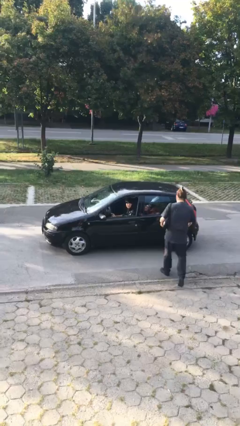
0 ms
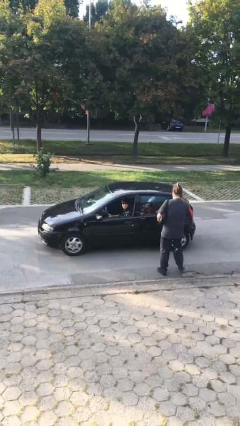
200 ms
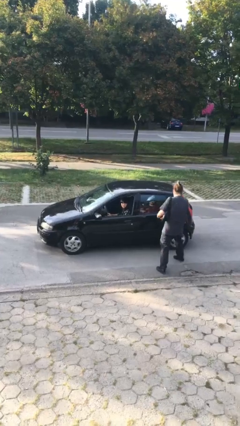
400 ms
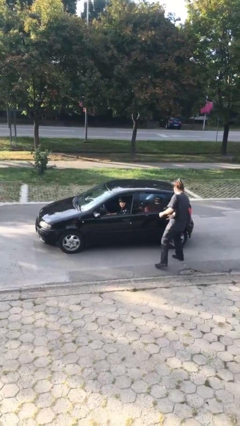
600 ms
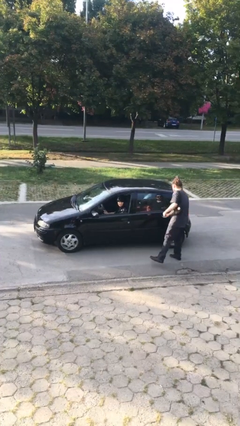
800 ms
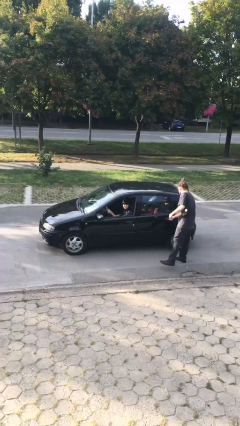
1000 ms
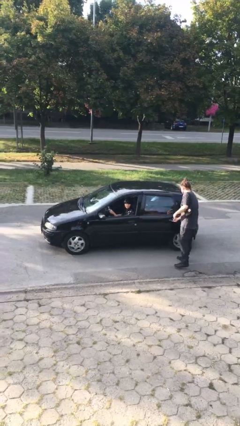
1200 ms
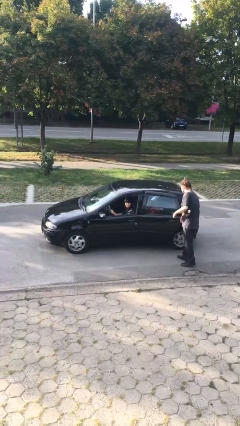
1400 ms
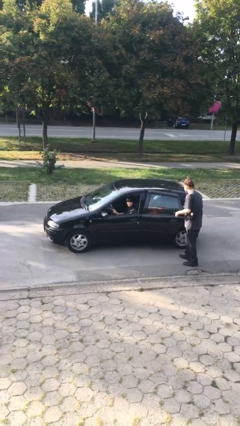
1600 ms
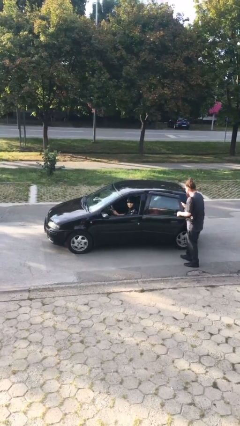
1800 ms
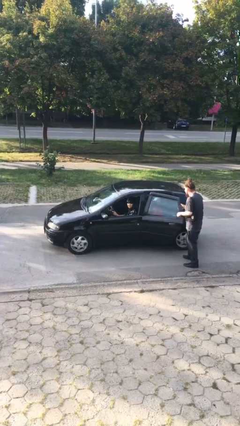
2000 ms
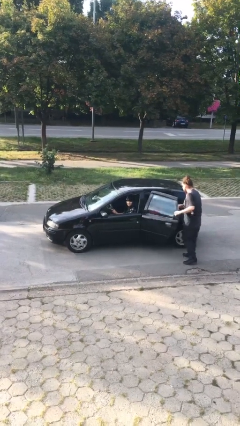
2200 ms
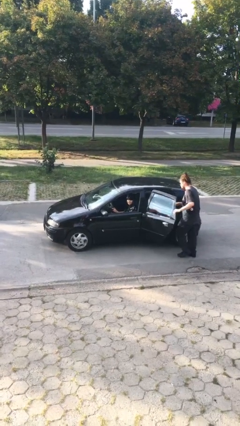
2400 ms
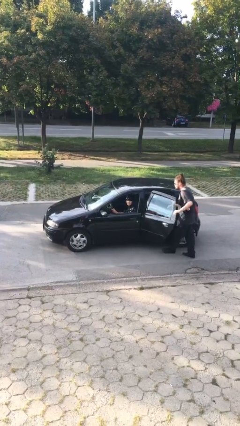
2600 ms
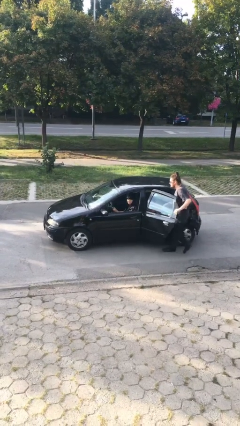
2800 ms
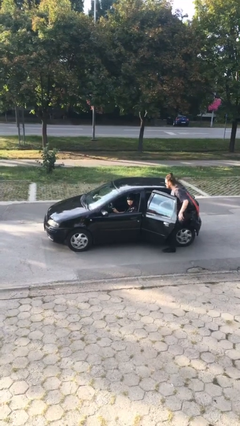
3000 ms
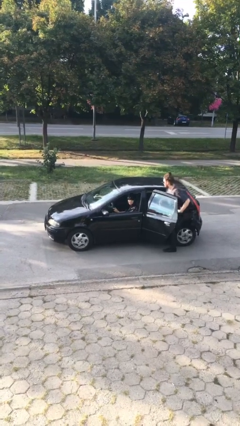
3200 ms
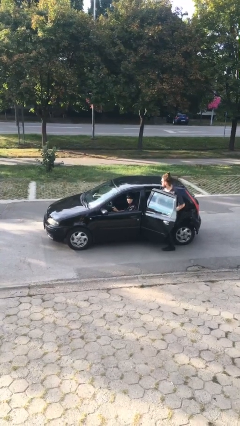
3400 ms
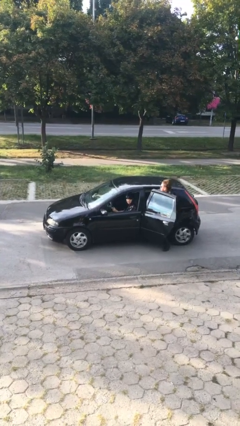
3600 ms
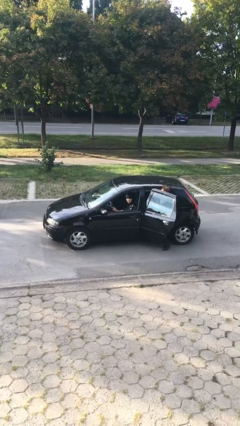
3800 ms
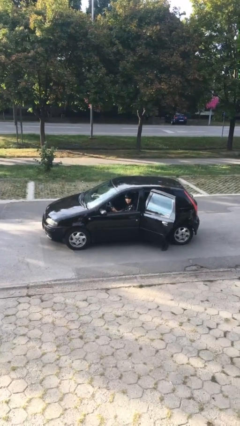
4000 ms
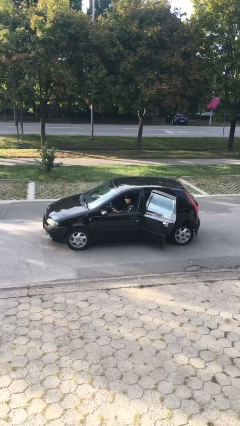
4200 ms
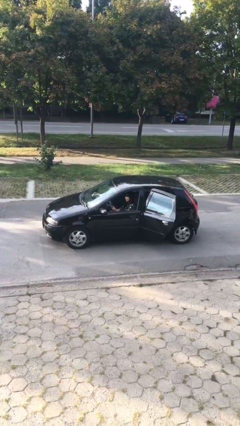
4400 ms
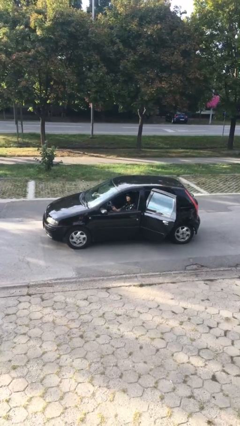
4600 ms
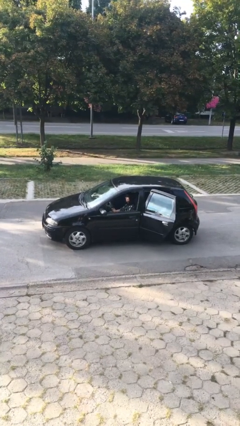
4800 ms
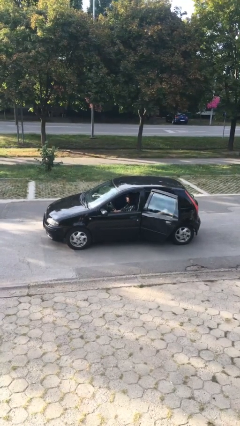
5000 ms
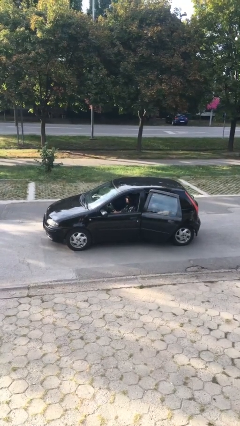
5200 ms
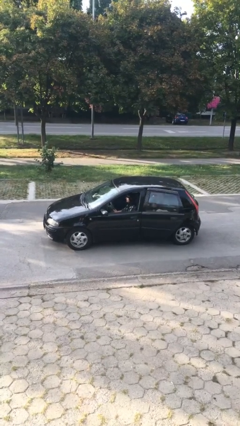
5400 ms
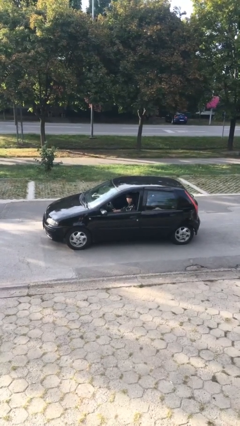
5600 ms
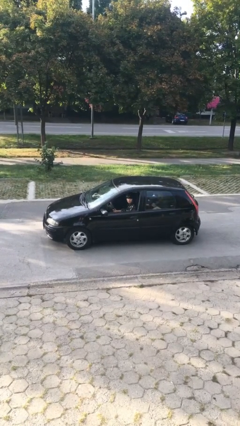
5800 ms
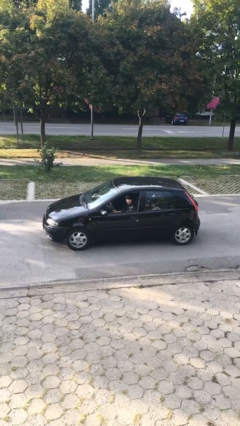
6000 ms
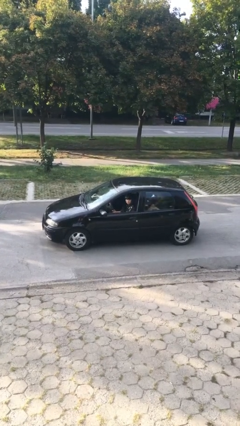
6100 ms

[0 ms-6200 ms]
car picks up person

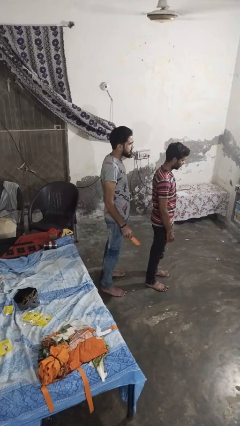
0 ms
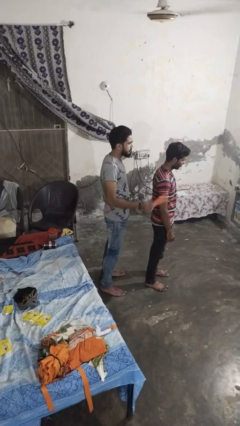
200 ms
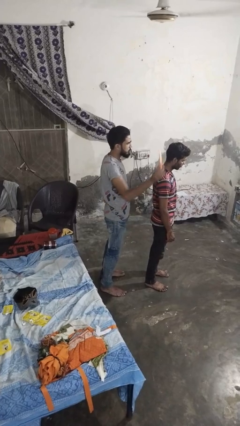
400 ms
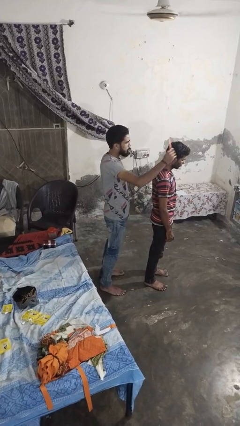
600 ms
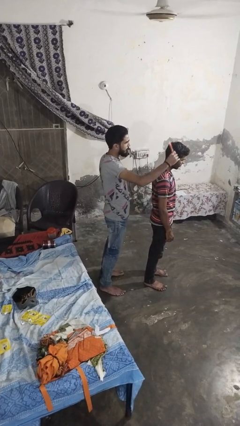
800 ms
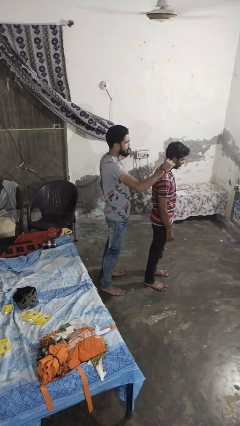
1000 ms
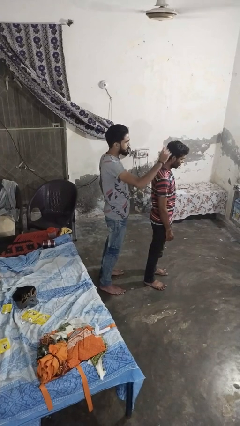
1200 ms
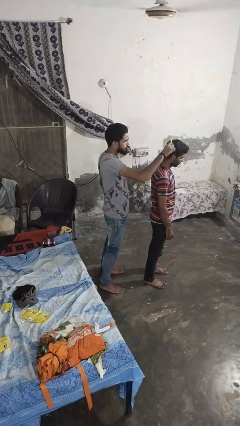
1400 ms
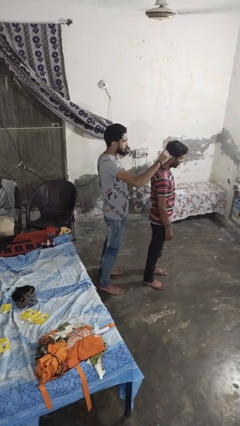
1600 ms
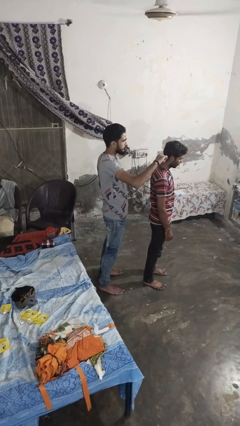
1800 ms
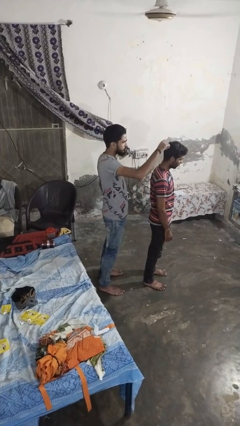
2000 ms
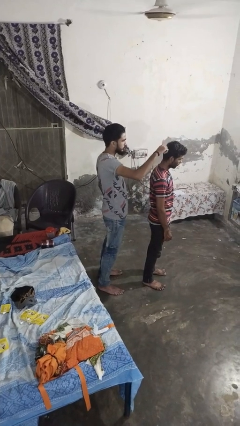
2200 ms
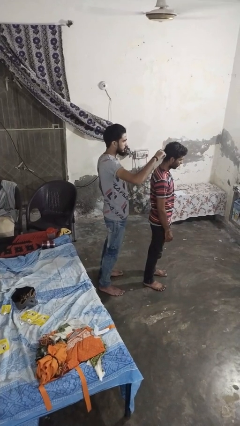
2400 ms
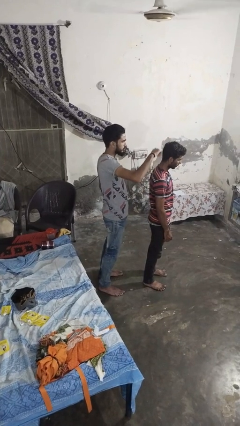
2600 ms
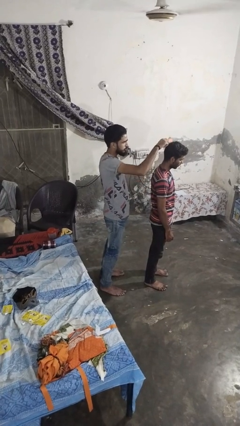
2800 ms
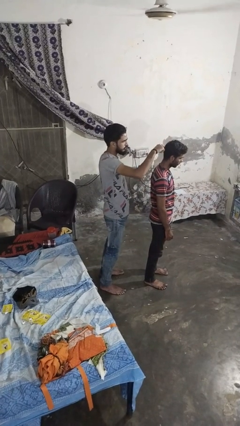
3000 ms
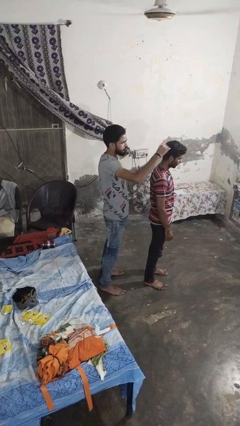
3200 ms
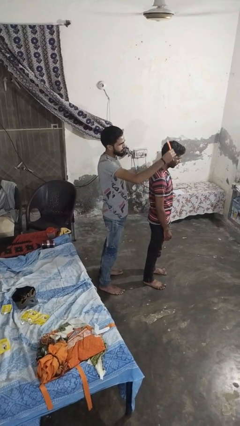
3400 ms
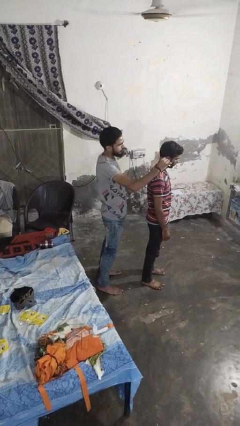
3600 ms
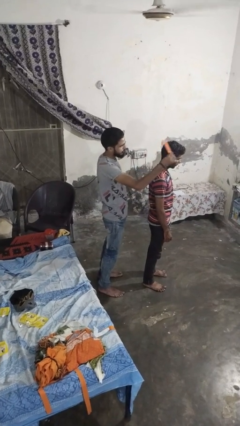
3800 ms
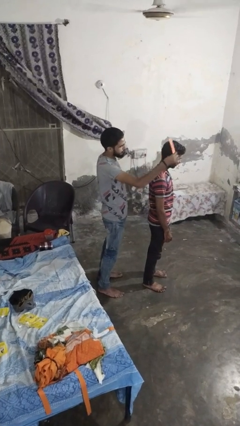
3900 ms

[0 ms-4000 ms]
person brushes hair of person

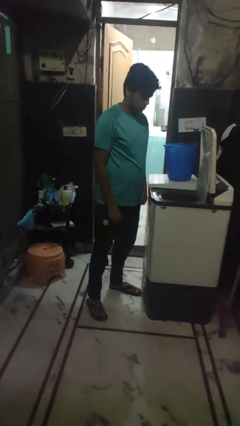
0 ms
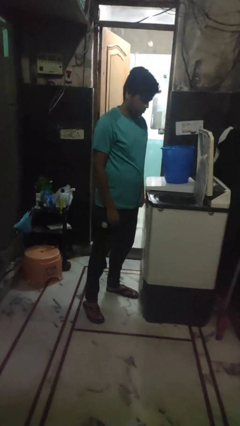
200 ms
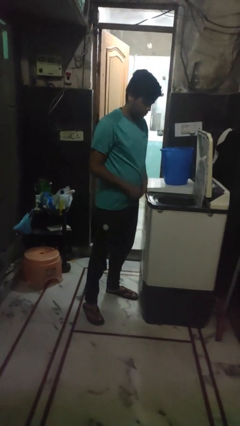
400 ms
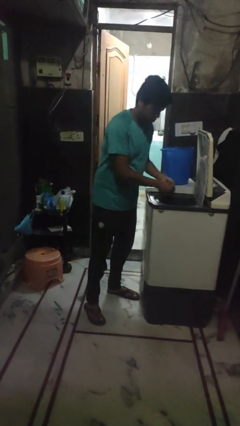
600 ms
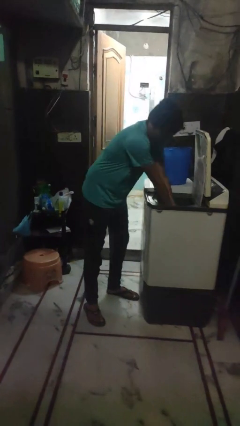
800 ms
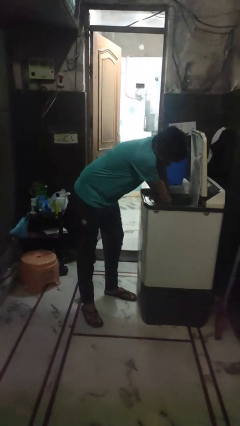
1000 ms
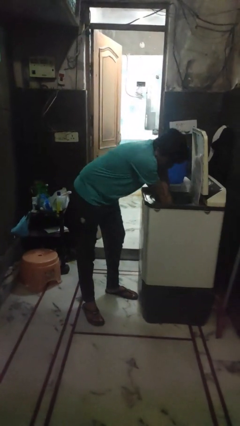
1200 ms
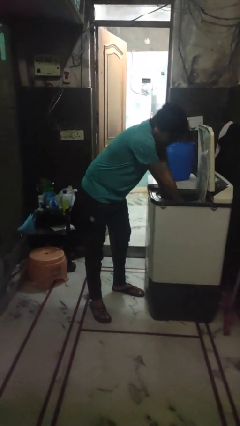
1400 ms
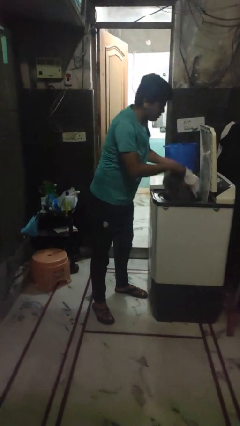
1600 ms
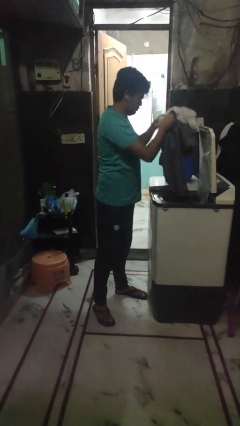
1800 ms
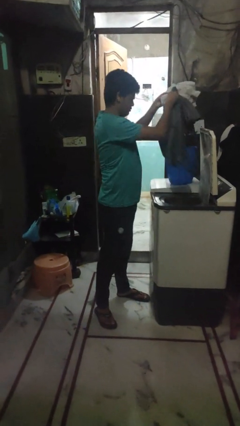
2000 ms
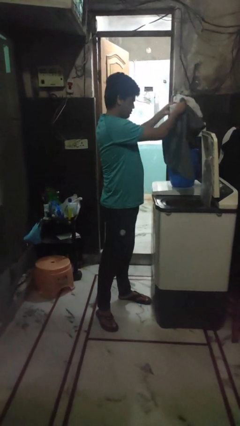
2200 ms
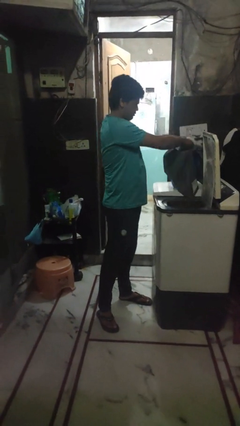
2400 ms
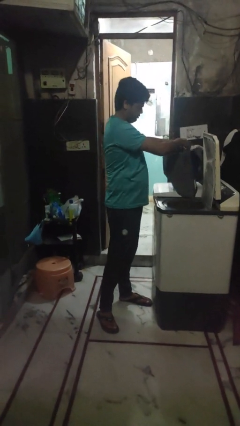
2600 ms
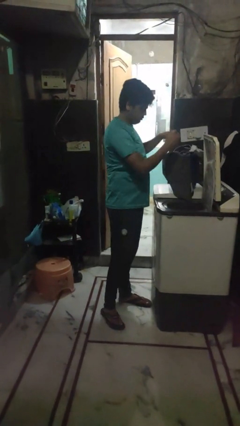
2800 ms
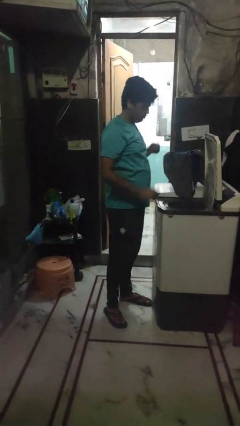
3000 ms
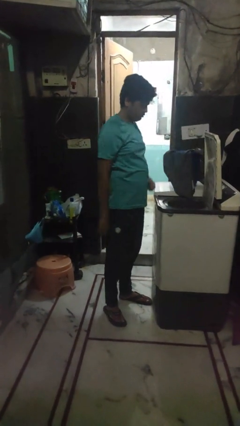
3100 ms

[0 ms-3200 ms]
person unloads clotheswasher

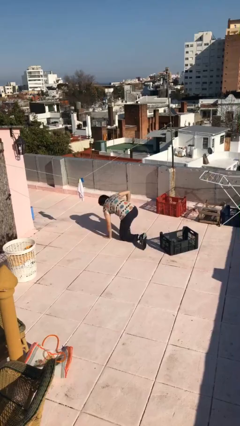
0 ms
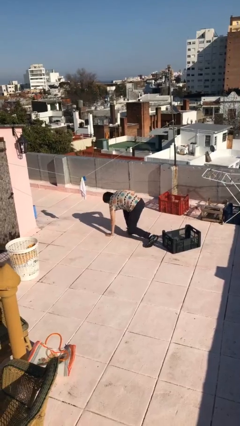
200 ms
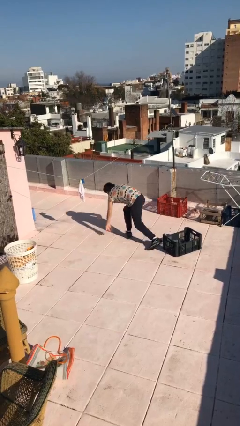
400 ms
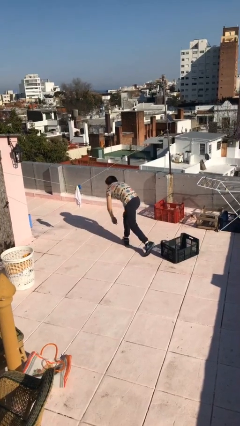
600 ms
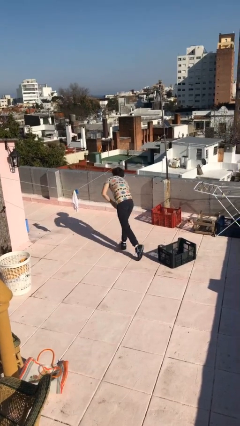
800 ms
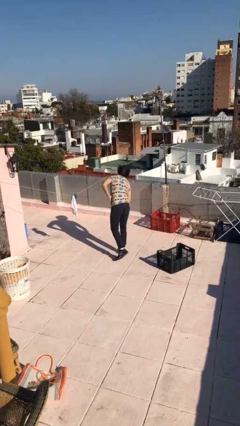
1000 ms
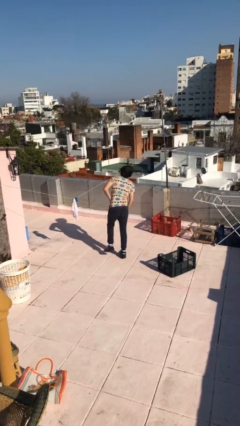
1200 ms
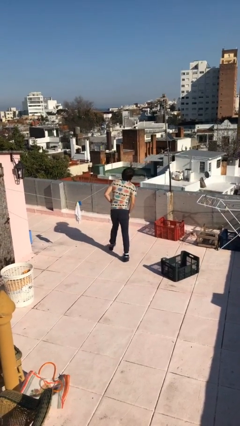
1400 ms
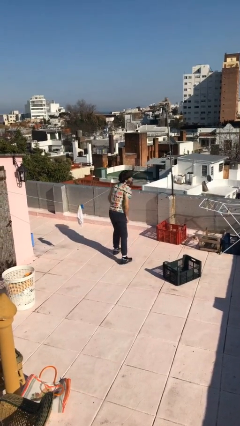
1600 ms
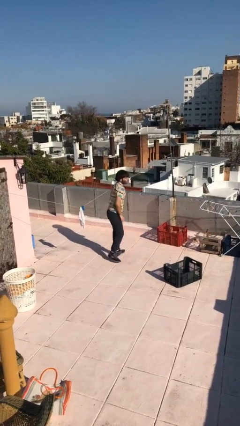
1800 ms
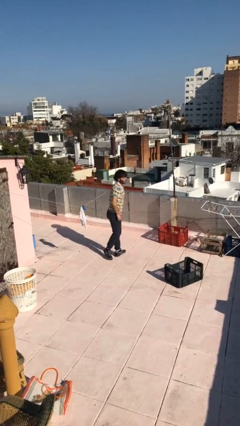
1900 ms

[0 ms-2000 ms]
person stands up from floor

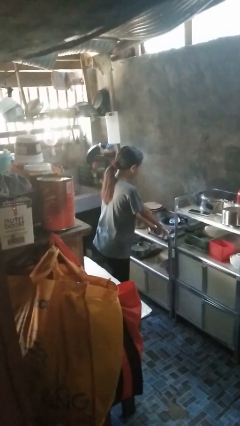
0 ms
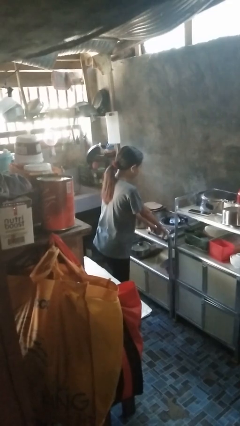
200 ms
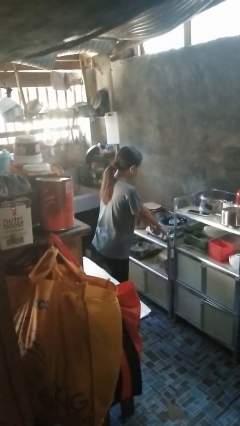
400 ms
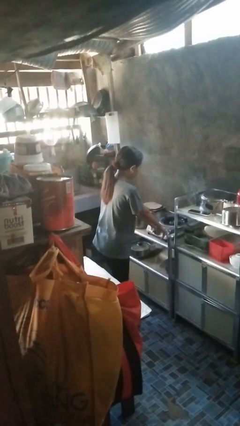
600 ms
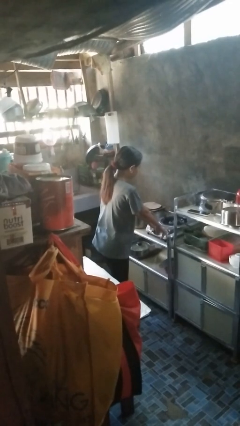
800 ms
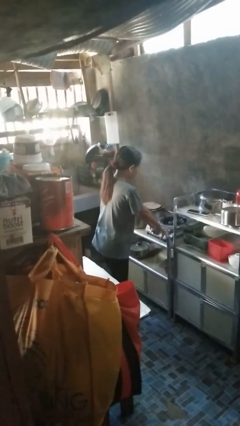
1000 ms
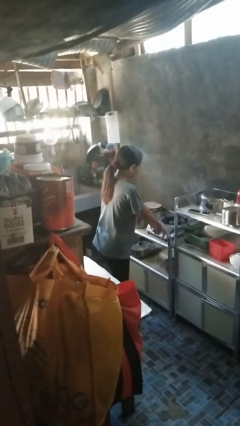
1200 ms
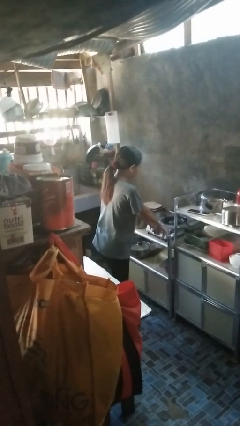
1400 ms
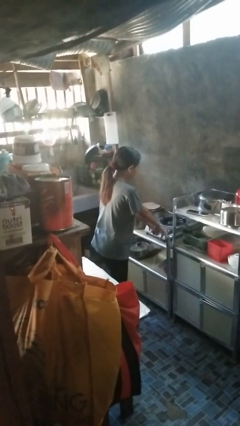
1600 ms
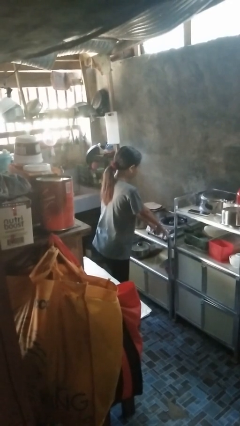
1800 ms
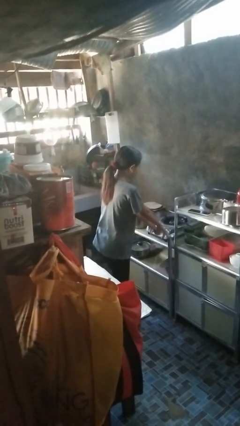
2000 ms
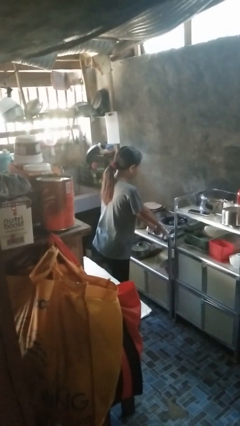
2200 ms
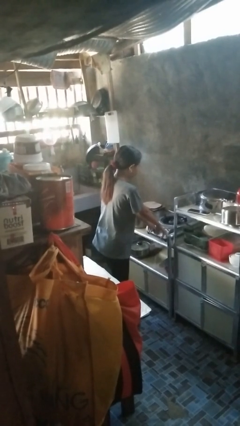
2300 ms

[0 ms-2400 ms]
person turns off stovetop
